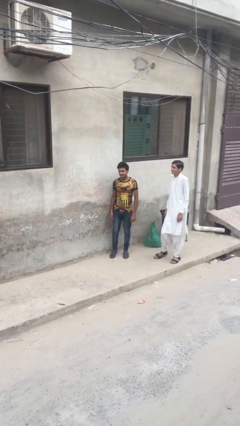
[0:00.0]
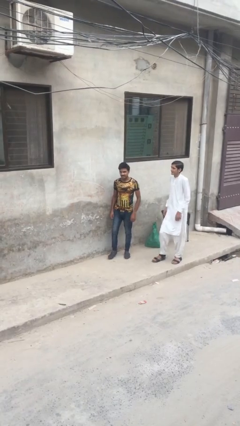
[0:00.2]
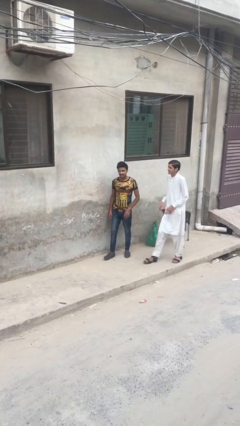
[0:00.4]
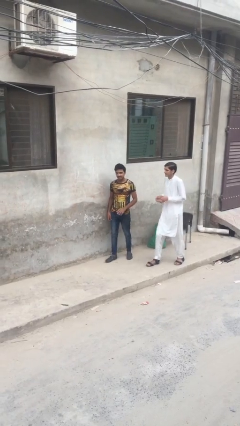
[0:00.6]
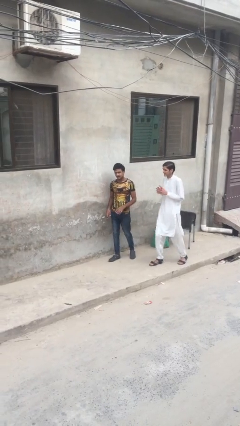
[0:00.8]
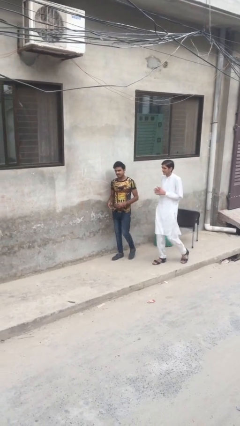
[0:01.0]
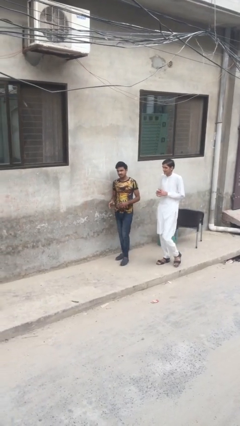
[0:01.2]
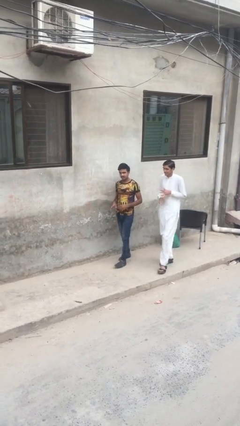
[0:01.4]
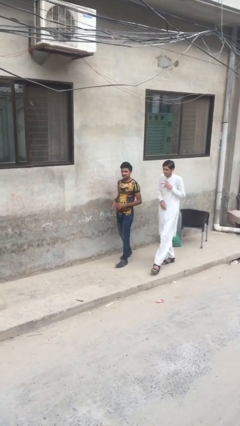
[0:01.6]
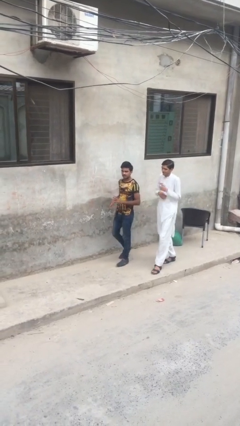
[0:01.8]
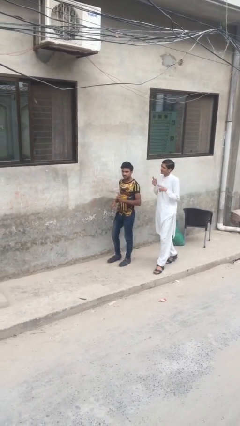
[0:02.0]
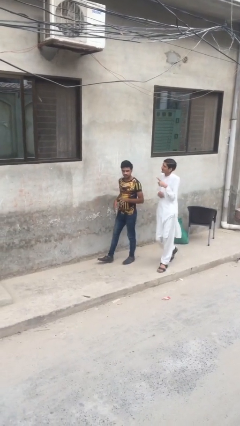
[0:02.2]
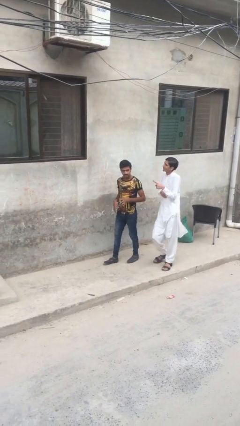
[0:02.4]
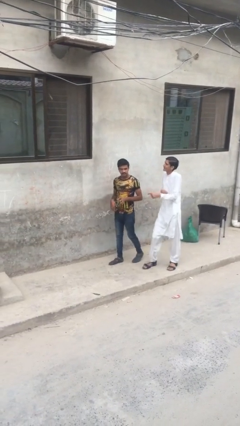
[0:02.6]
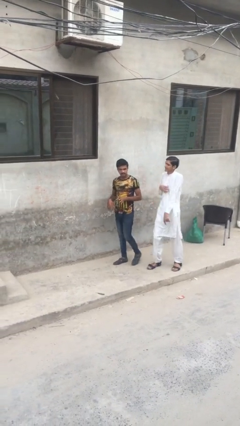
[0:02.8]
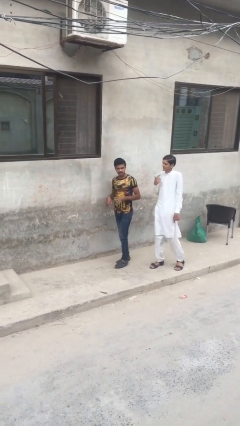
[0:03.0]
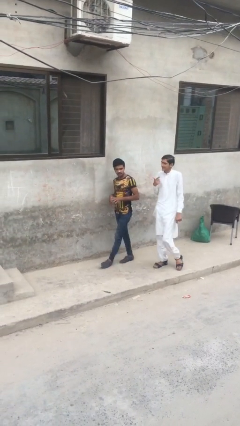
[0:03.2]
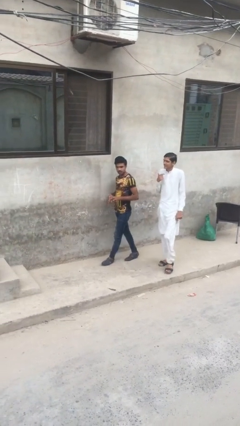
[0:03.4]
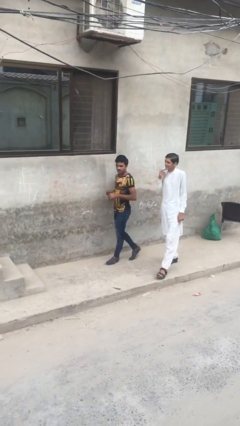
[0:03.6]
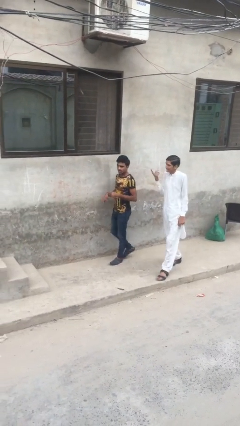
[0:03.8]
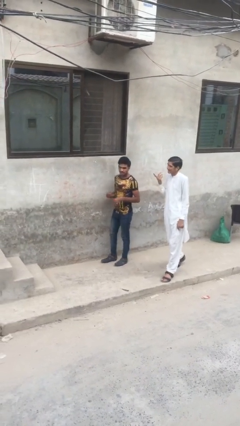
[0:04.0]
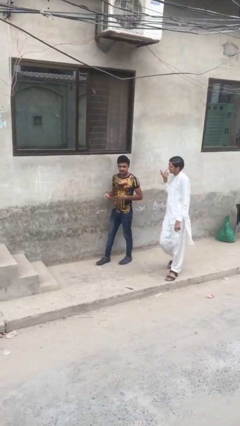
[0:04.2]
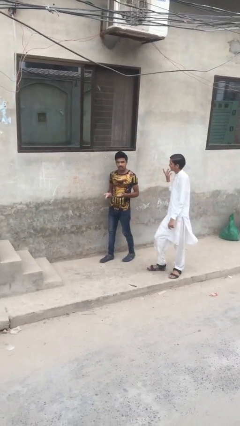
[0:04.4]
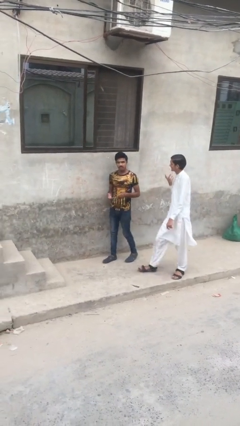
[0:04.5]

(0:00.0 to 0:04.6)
person talks to person

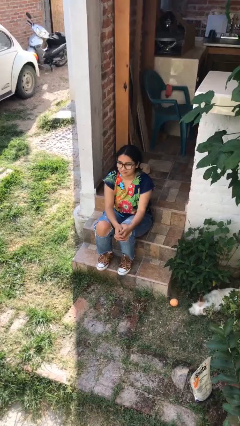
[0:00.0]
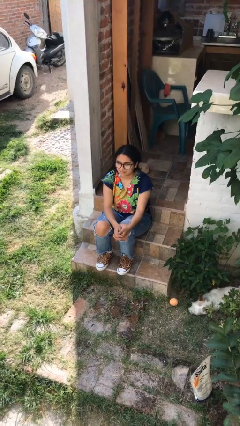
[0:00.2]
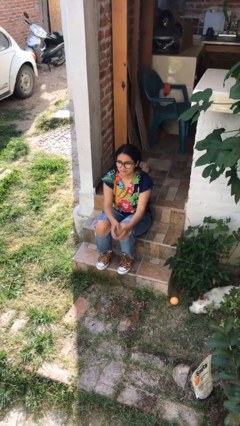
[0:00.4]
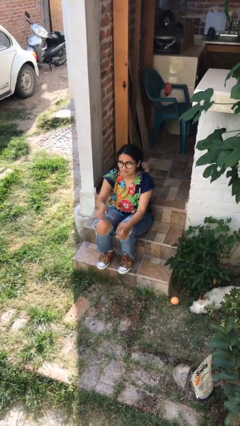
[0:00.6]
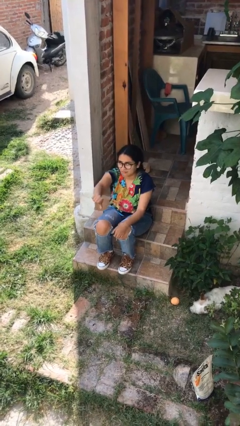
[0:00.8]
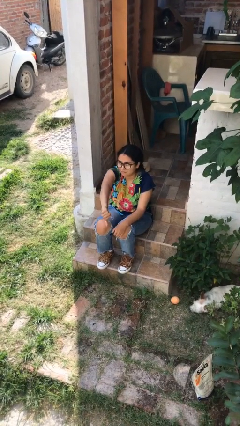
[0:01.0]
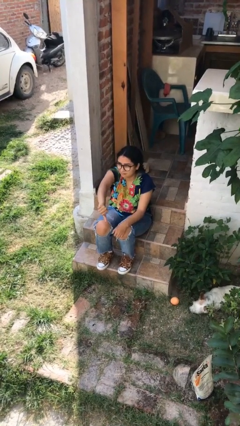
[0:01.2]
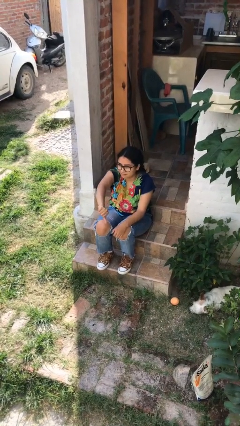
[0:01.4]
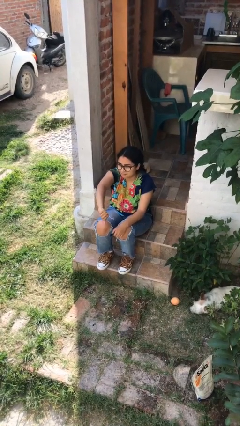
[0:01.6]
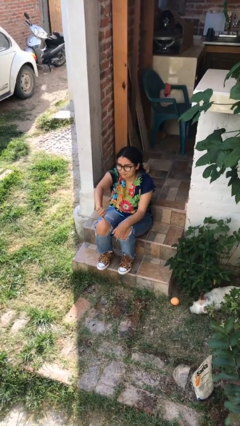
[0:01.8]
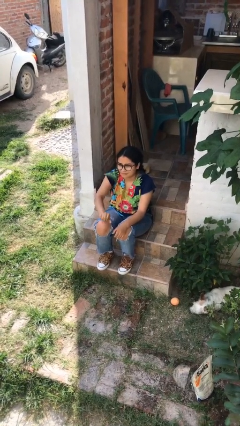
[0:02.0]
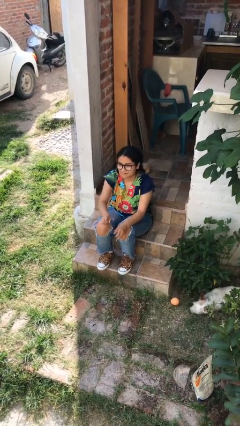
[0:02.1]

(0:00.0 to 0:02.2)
person gestures thumbs down

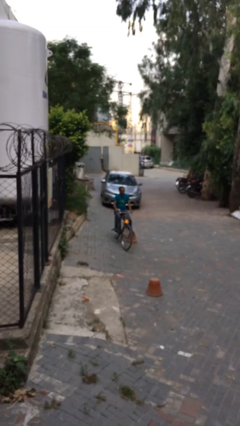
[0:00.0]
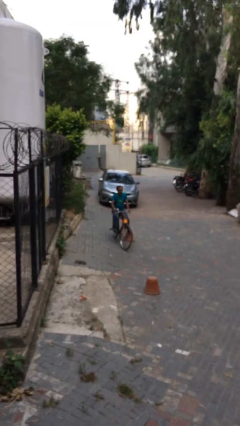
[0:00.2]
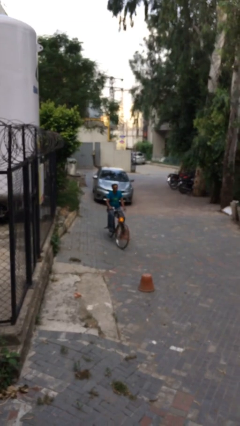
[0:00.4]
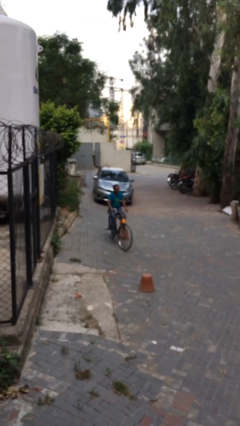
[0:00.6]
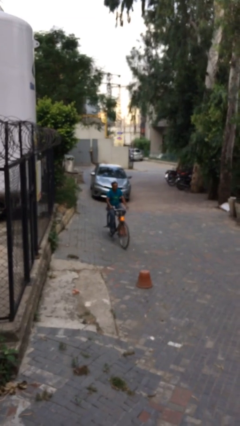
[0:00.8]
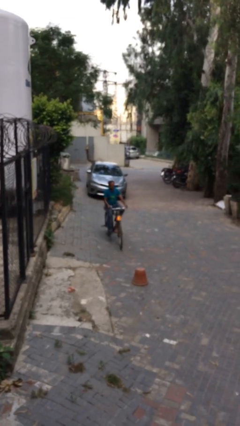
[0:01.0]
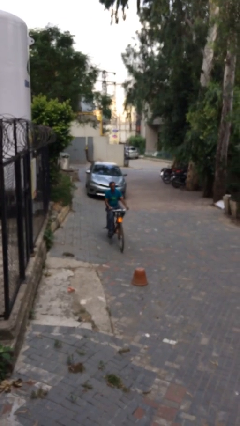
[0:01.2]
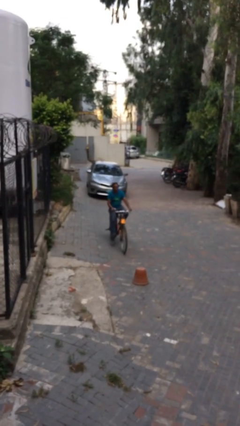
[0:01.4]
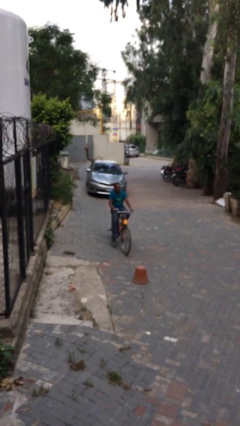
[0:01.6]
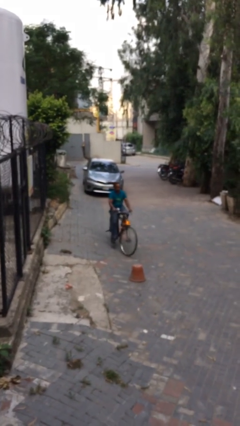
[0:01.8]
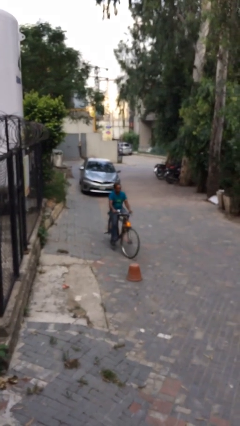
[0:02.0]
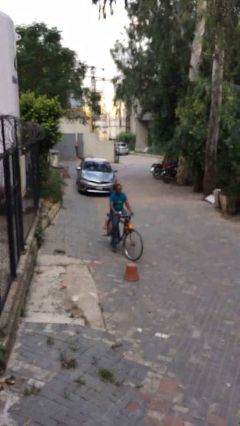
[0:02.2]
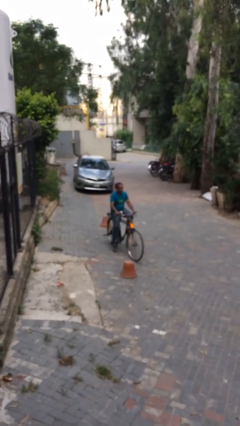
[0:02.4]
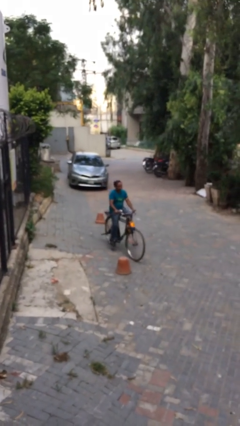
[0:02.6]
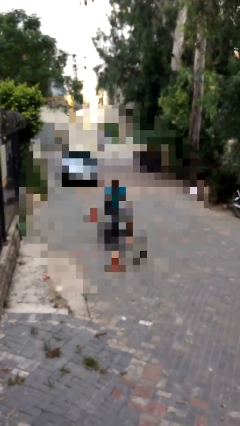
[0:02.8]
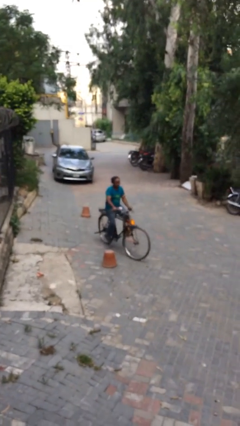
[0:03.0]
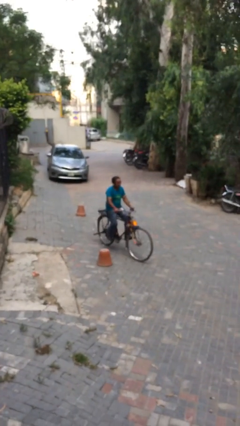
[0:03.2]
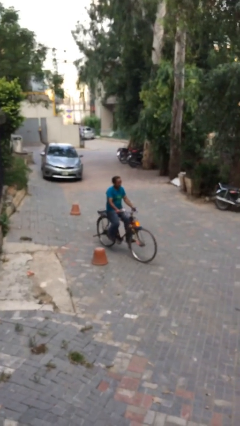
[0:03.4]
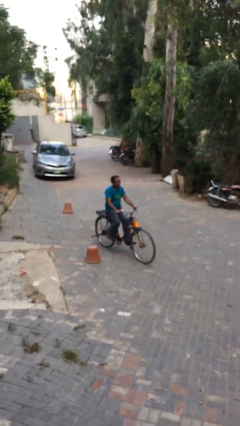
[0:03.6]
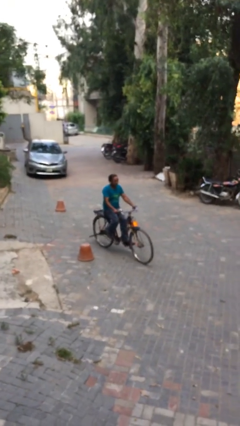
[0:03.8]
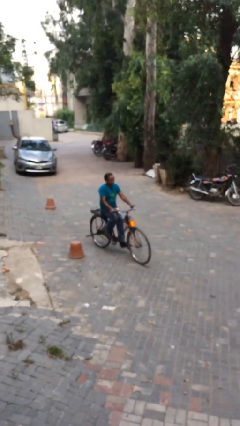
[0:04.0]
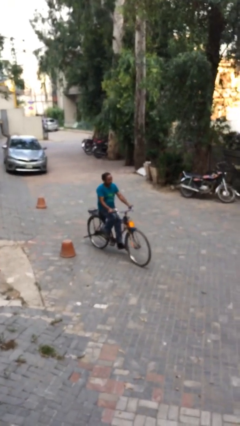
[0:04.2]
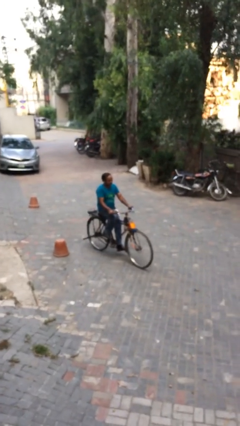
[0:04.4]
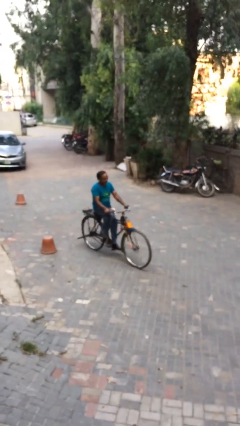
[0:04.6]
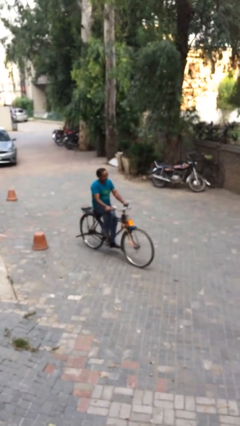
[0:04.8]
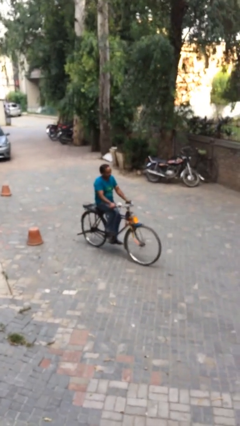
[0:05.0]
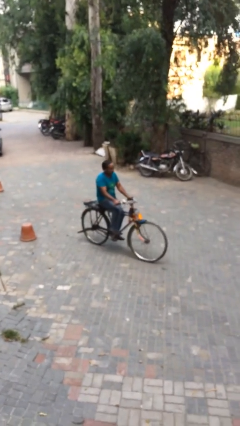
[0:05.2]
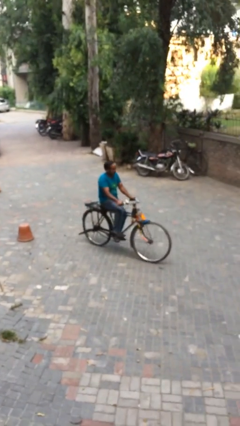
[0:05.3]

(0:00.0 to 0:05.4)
person rides bicycle

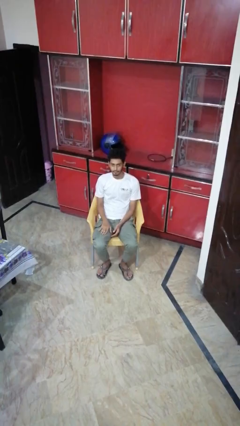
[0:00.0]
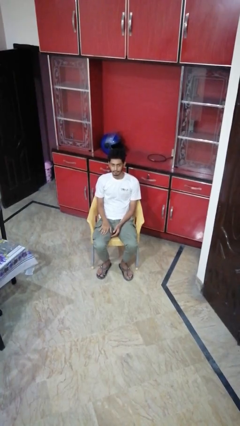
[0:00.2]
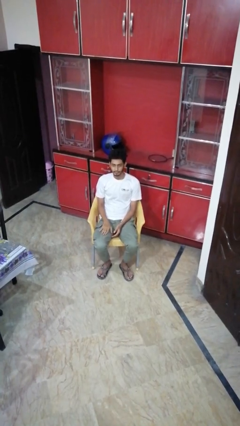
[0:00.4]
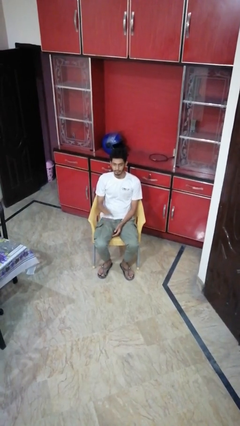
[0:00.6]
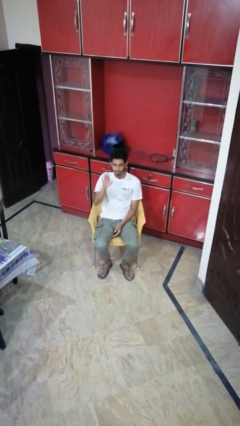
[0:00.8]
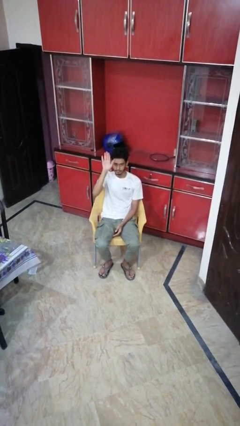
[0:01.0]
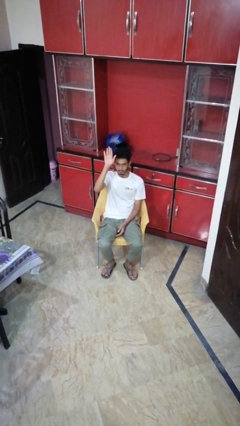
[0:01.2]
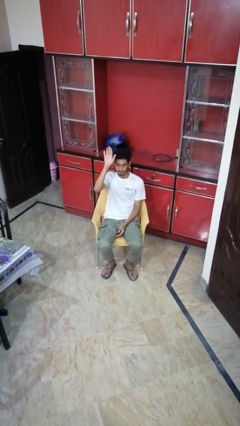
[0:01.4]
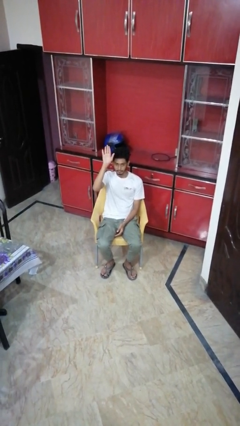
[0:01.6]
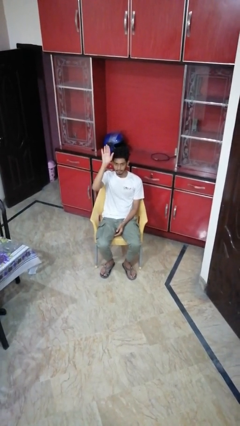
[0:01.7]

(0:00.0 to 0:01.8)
person gestures raise hand

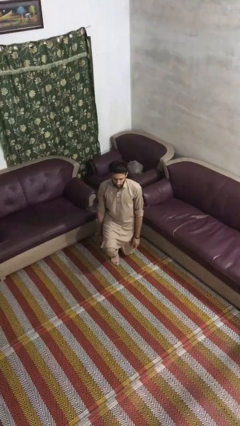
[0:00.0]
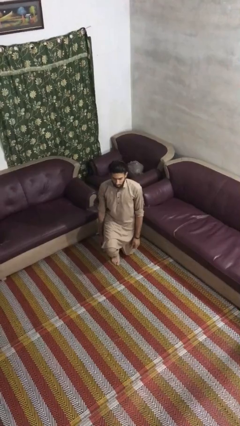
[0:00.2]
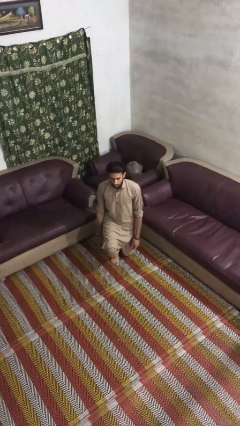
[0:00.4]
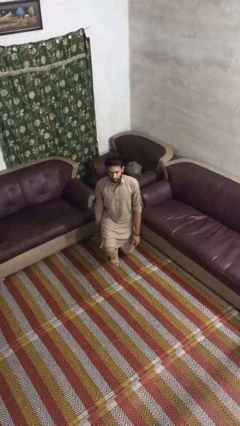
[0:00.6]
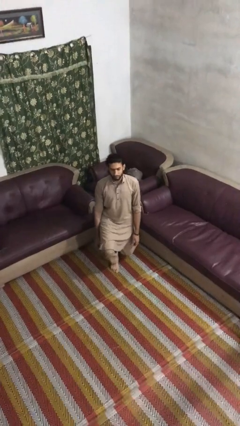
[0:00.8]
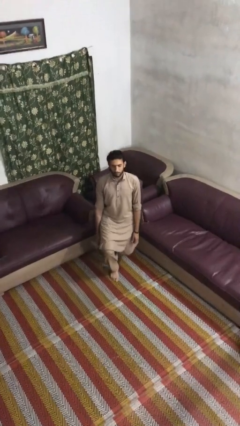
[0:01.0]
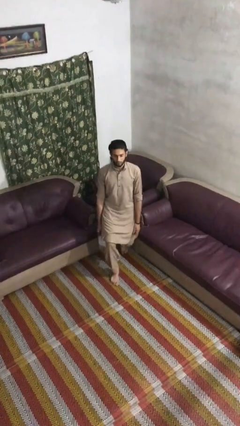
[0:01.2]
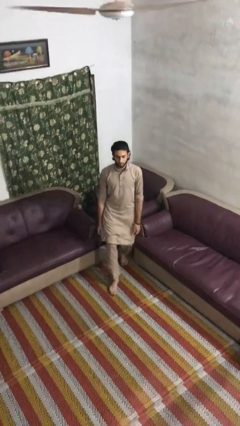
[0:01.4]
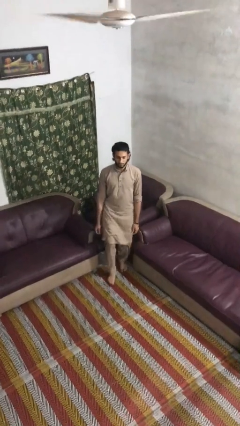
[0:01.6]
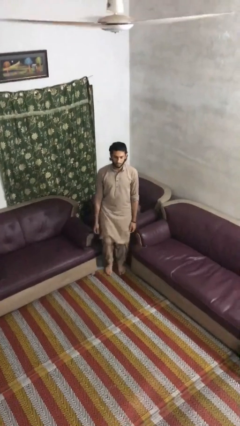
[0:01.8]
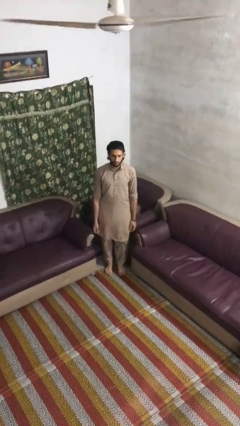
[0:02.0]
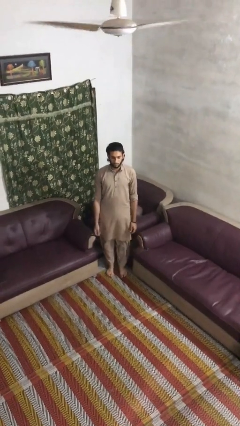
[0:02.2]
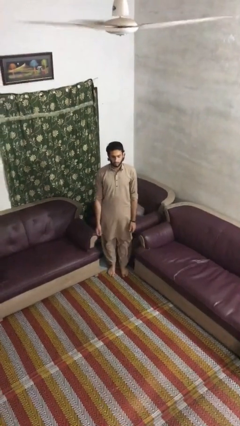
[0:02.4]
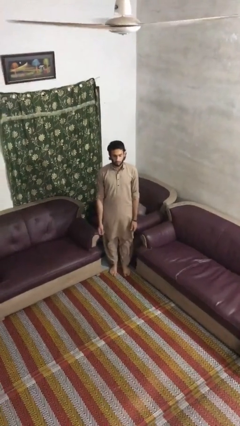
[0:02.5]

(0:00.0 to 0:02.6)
person stands up from floor

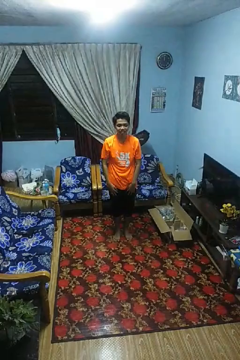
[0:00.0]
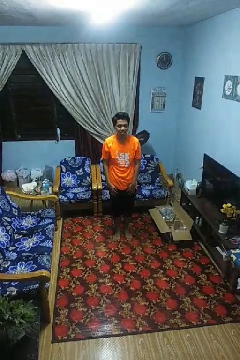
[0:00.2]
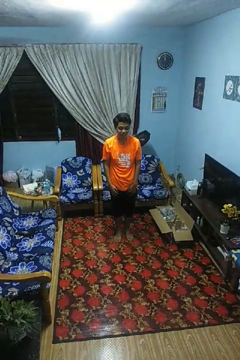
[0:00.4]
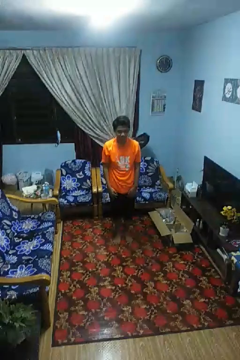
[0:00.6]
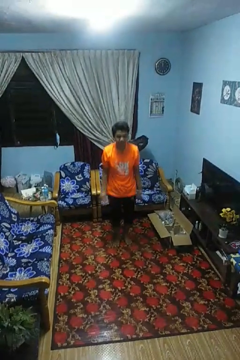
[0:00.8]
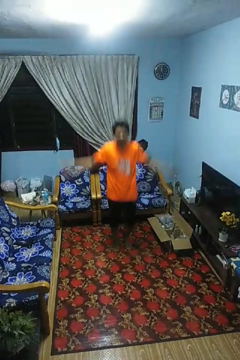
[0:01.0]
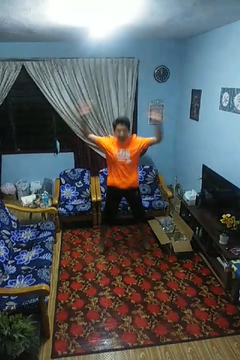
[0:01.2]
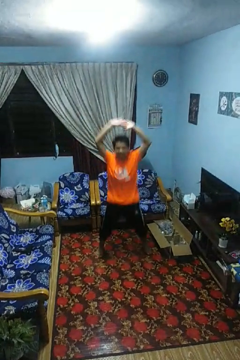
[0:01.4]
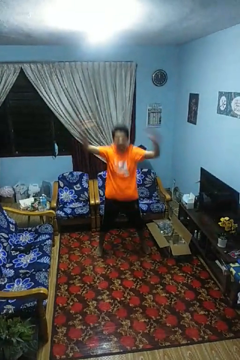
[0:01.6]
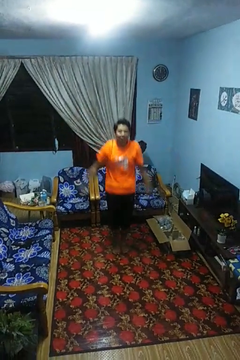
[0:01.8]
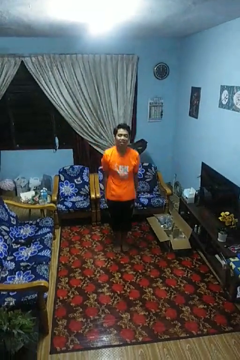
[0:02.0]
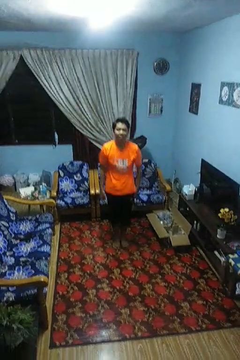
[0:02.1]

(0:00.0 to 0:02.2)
person exercises with jumping jacks
